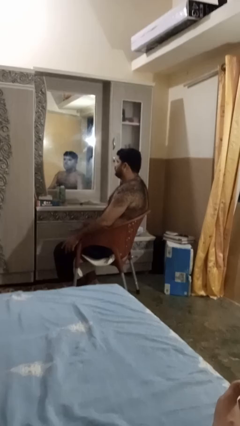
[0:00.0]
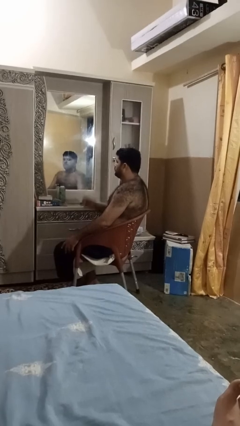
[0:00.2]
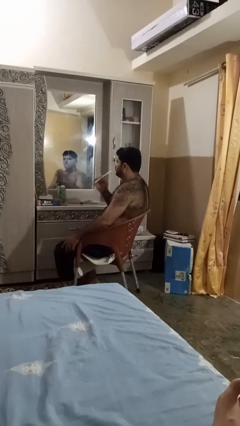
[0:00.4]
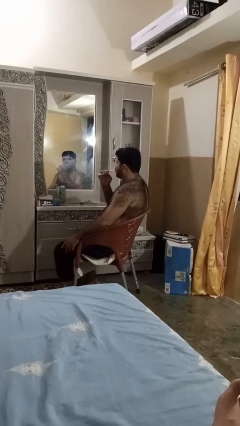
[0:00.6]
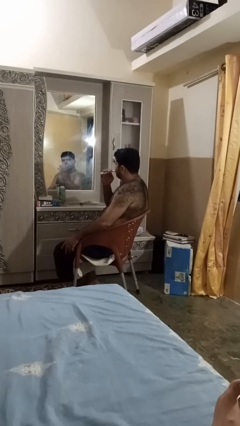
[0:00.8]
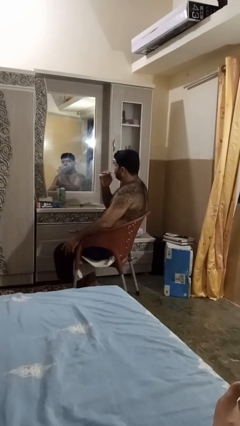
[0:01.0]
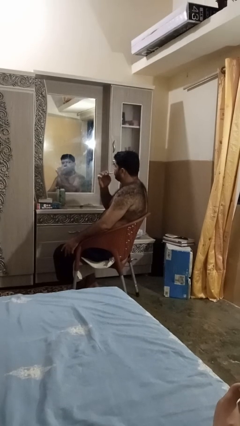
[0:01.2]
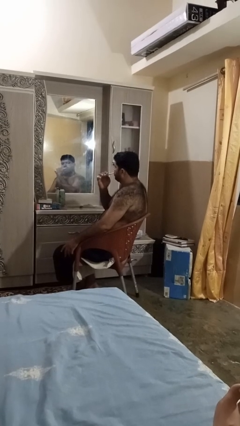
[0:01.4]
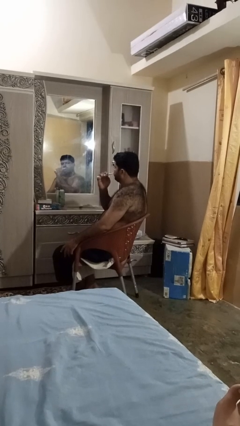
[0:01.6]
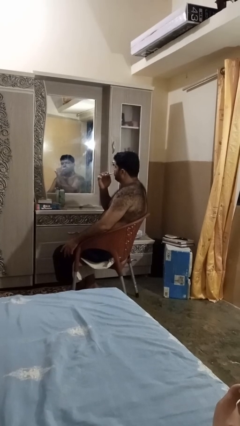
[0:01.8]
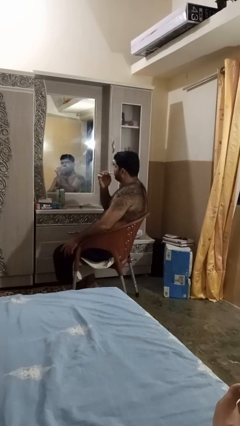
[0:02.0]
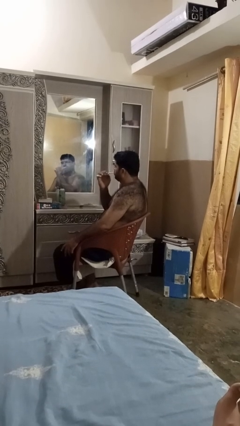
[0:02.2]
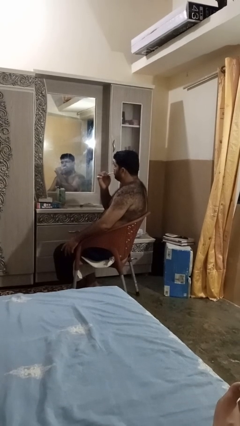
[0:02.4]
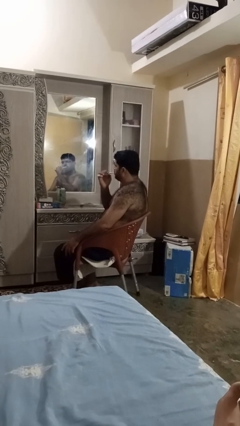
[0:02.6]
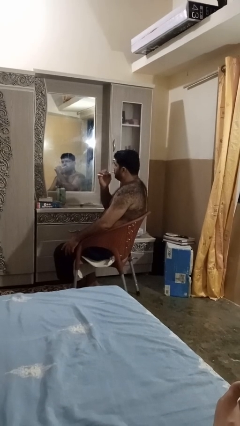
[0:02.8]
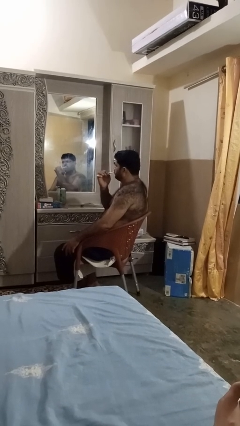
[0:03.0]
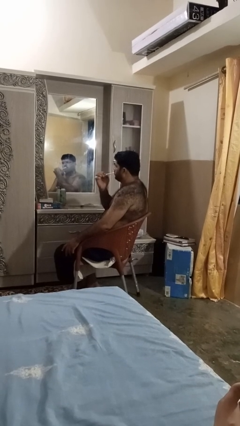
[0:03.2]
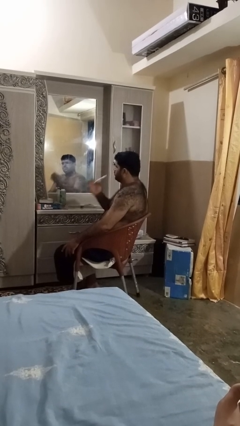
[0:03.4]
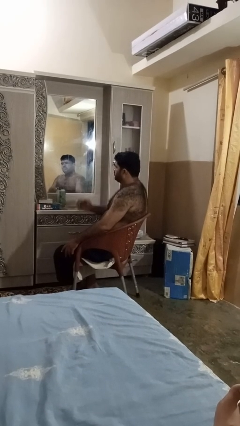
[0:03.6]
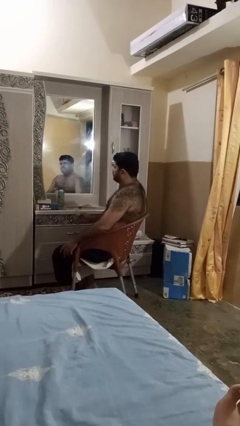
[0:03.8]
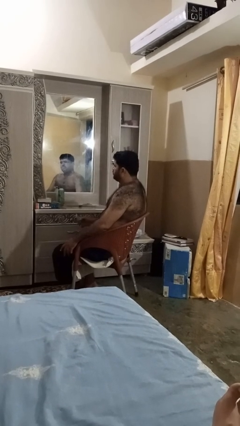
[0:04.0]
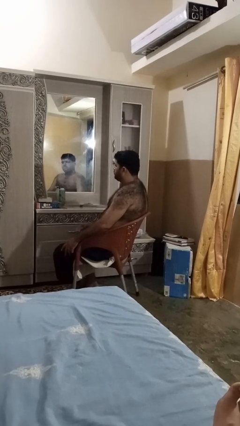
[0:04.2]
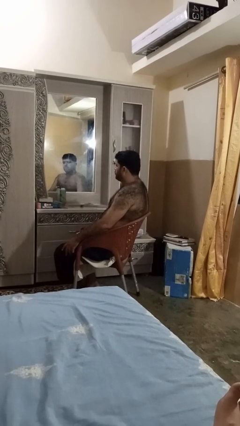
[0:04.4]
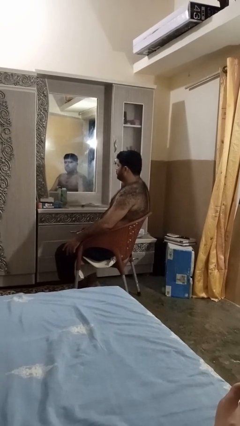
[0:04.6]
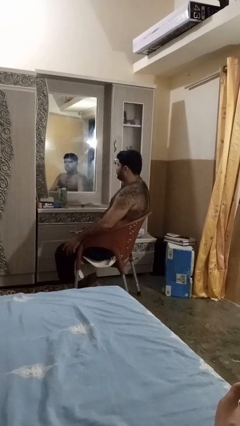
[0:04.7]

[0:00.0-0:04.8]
person brushes teeth

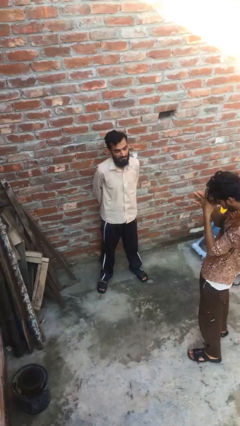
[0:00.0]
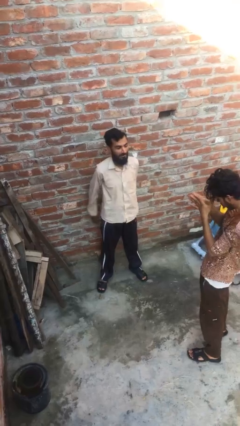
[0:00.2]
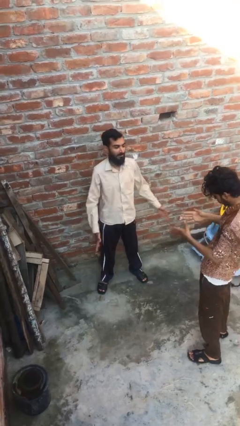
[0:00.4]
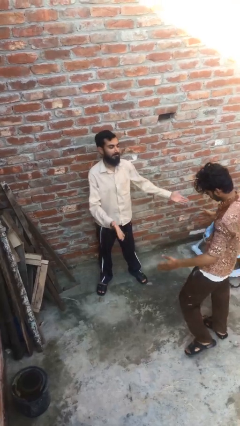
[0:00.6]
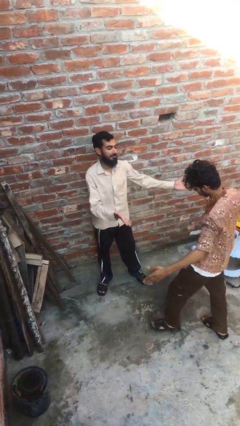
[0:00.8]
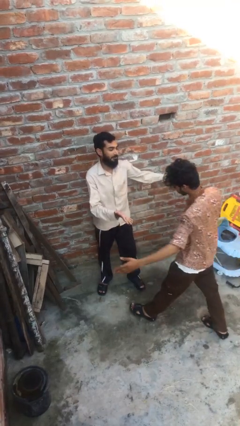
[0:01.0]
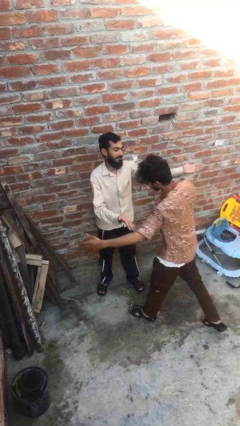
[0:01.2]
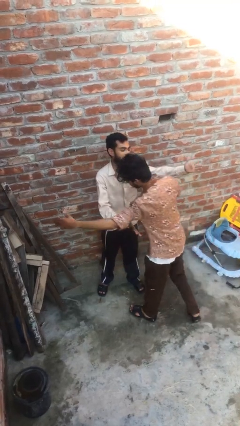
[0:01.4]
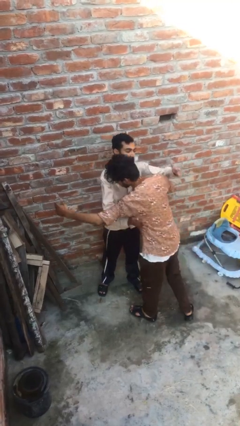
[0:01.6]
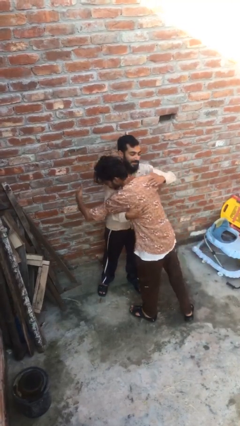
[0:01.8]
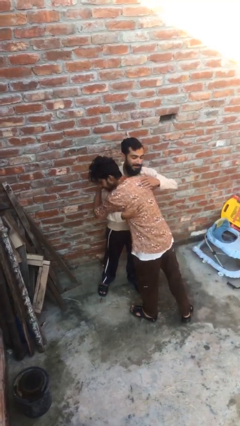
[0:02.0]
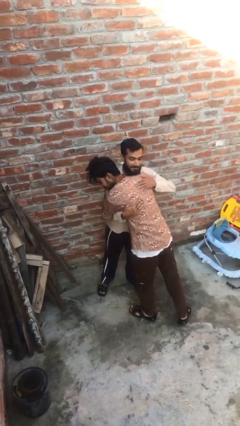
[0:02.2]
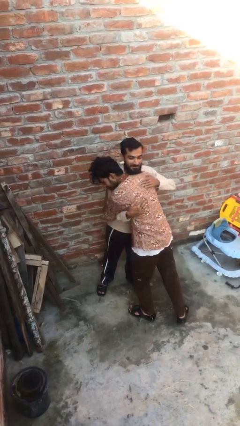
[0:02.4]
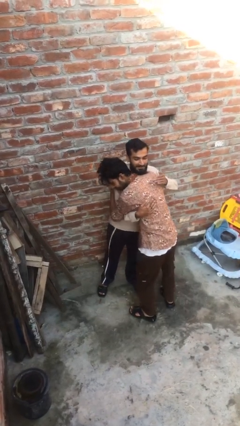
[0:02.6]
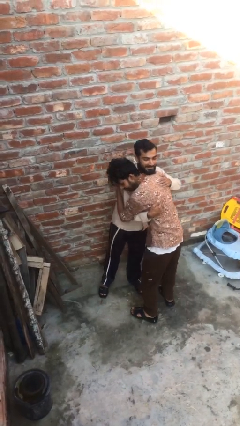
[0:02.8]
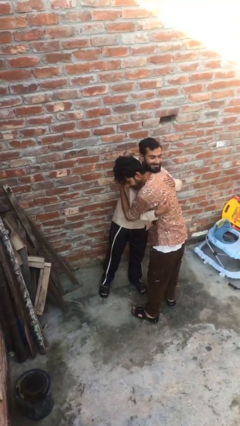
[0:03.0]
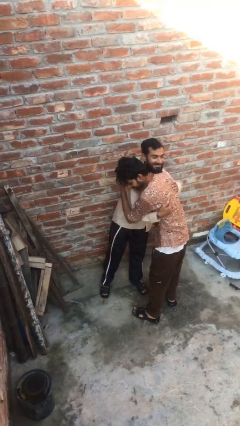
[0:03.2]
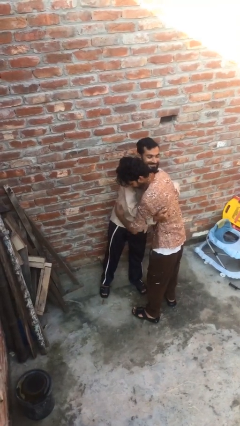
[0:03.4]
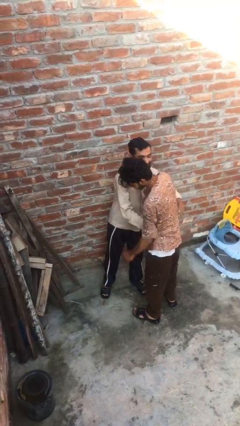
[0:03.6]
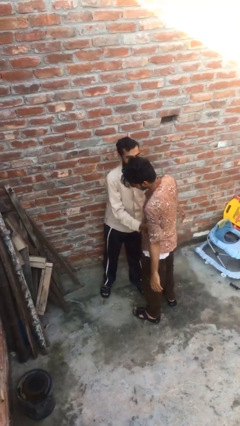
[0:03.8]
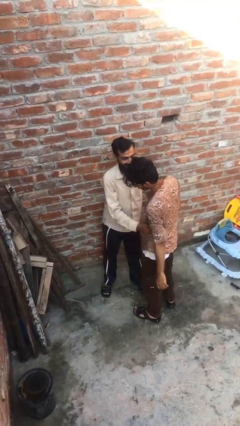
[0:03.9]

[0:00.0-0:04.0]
person embraces person

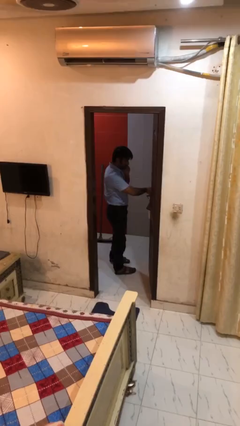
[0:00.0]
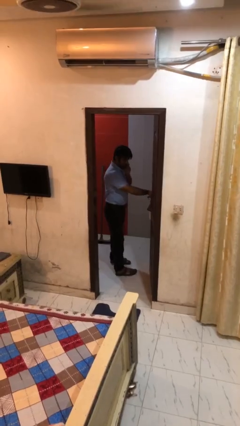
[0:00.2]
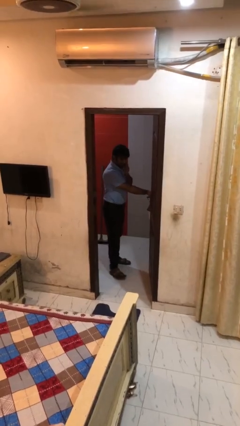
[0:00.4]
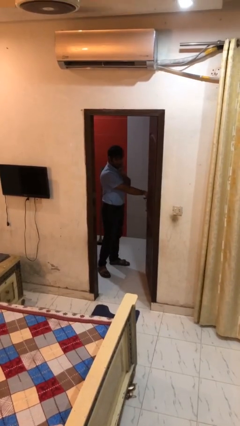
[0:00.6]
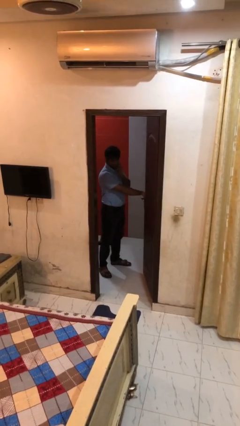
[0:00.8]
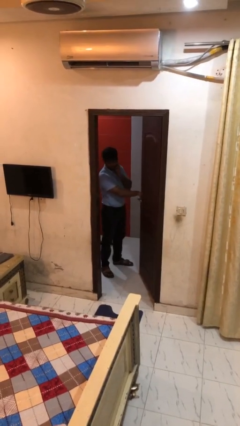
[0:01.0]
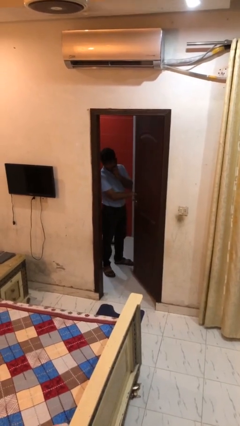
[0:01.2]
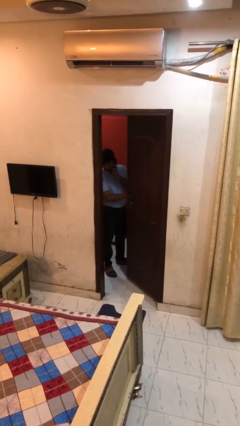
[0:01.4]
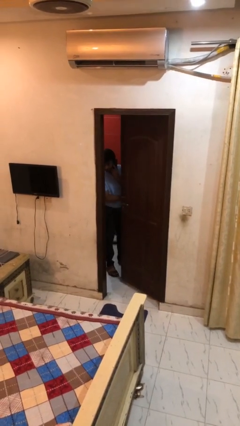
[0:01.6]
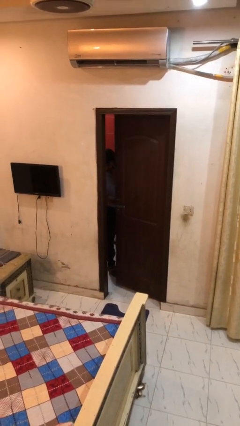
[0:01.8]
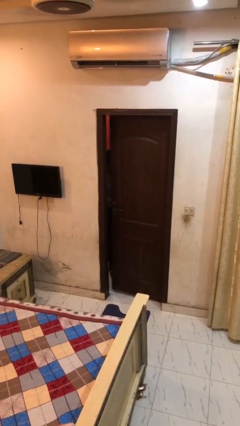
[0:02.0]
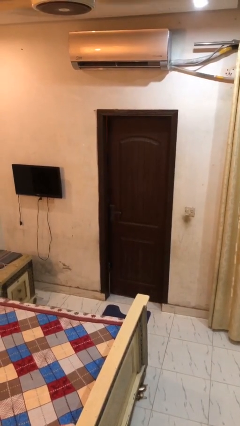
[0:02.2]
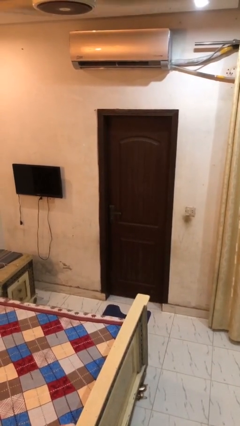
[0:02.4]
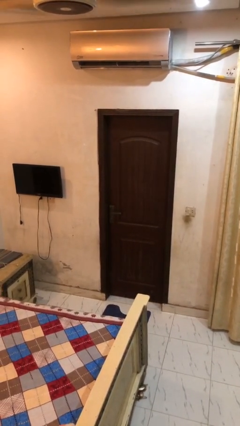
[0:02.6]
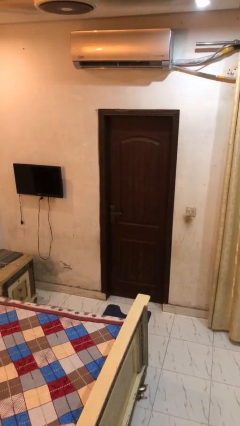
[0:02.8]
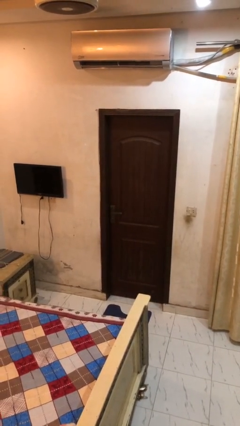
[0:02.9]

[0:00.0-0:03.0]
person closes facility door

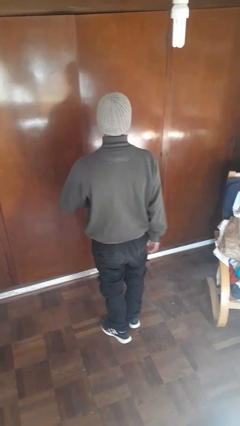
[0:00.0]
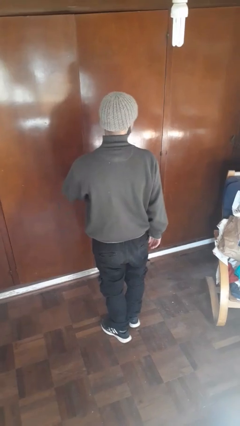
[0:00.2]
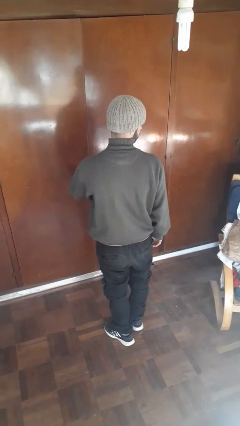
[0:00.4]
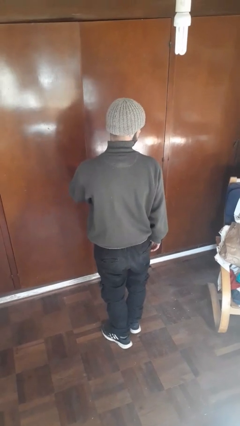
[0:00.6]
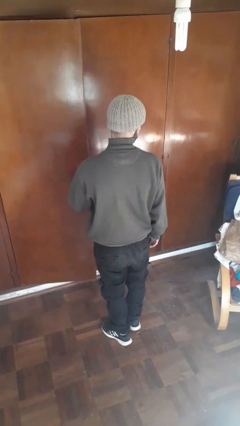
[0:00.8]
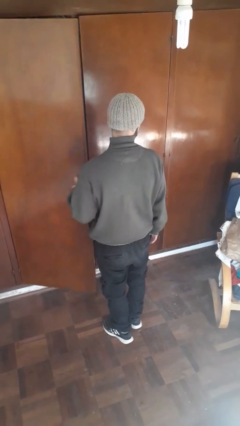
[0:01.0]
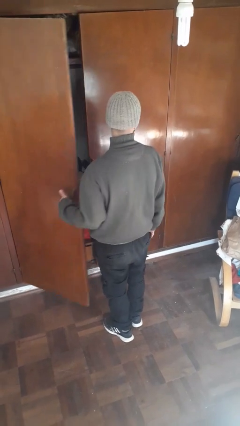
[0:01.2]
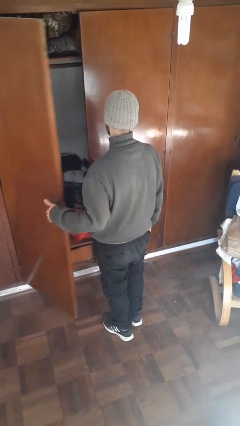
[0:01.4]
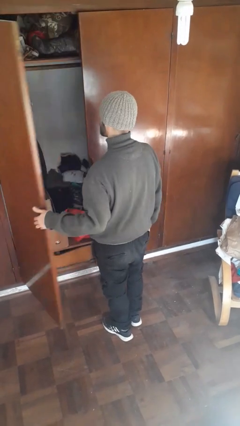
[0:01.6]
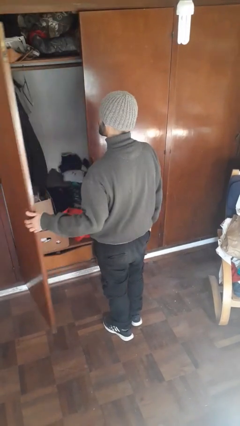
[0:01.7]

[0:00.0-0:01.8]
person opens closet door

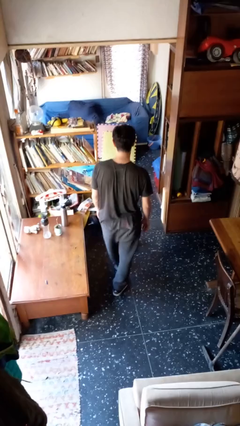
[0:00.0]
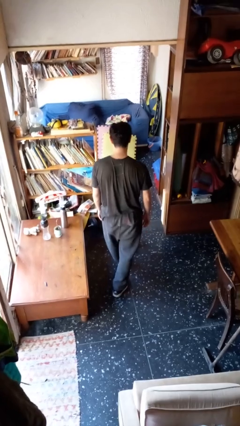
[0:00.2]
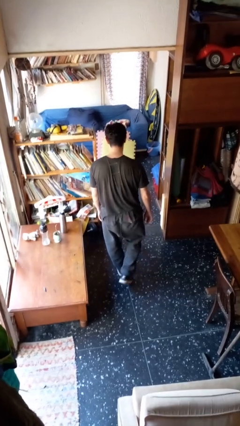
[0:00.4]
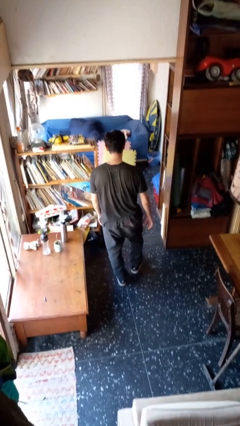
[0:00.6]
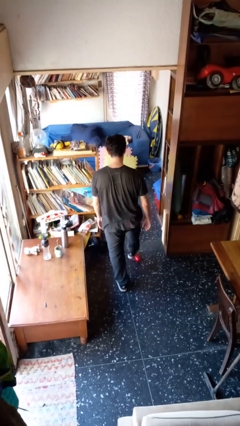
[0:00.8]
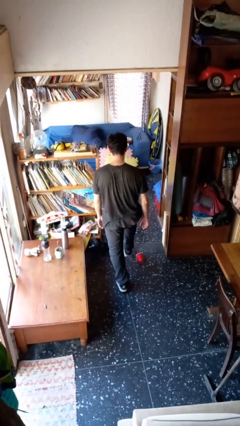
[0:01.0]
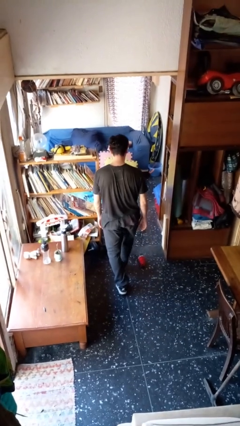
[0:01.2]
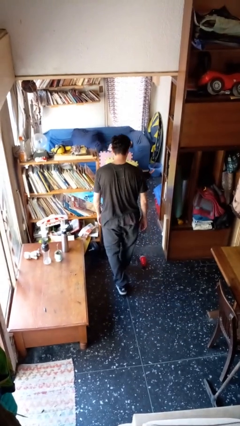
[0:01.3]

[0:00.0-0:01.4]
person spills on floor

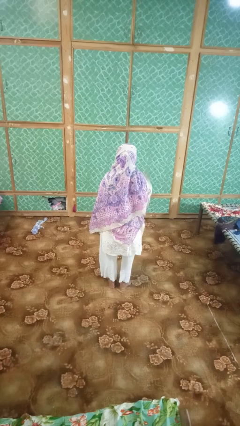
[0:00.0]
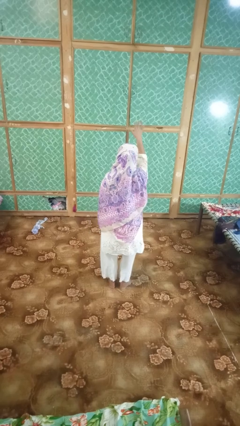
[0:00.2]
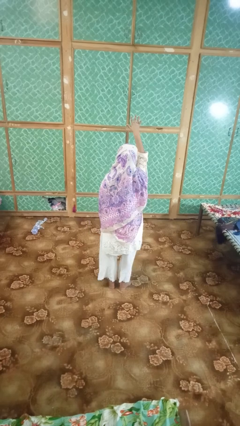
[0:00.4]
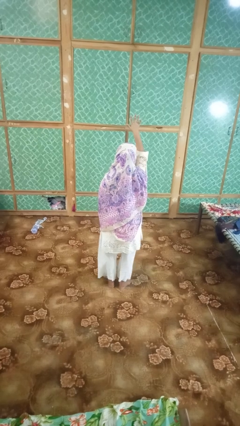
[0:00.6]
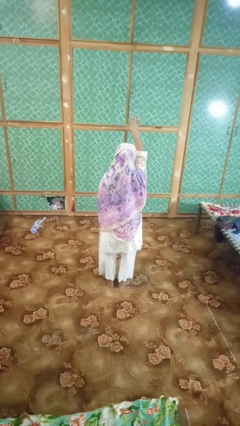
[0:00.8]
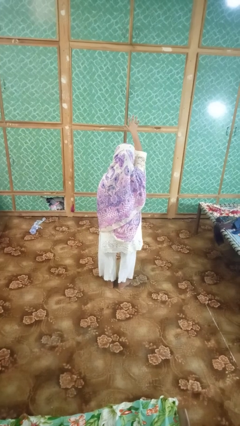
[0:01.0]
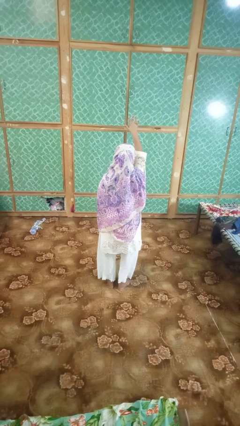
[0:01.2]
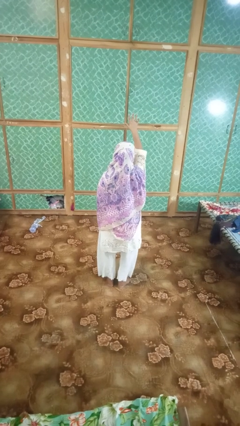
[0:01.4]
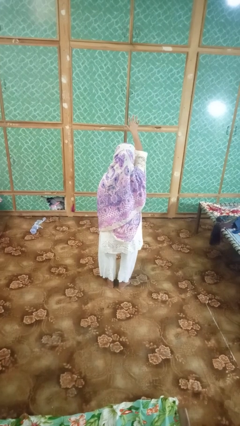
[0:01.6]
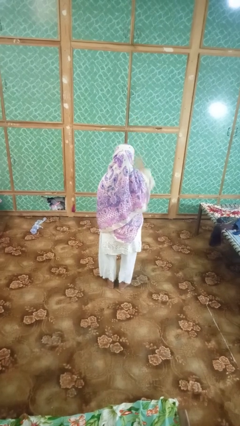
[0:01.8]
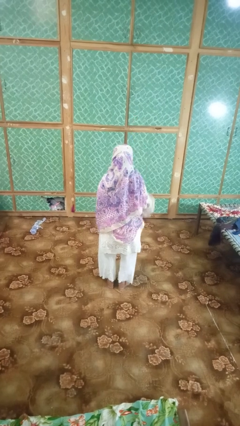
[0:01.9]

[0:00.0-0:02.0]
person gestures number five

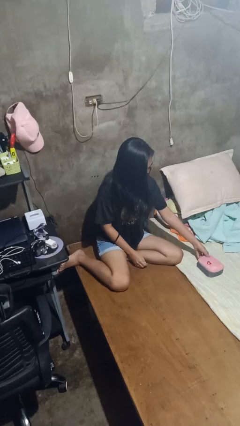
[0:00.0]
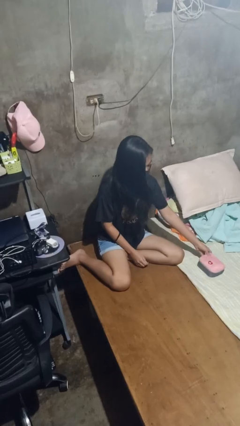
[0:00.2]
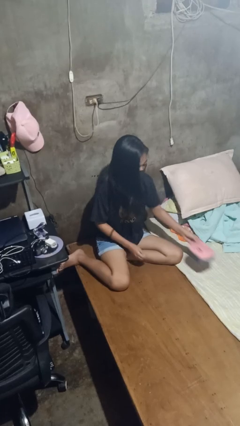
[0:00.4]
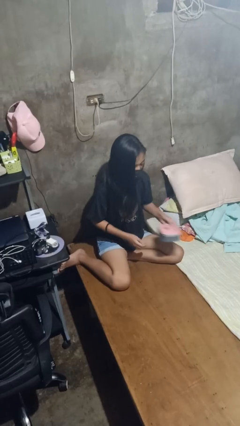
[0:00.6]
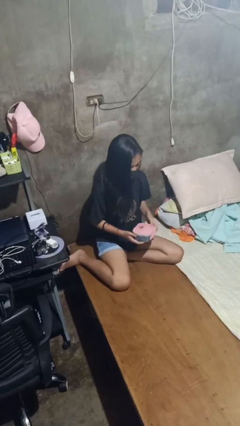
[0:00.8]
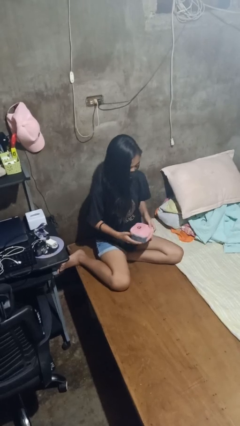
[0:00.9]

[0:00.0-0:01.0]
person picks up object from bed
